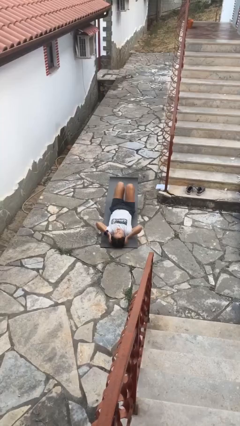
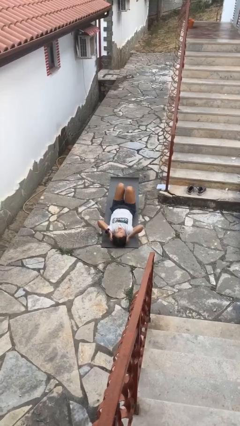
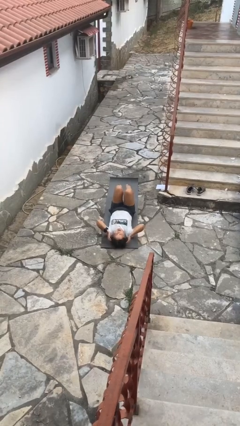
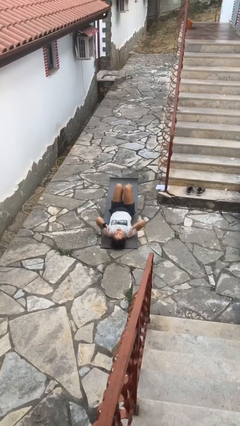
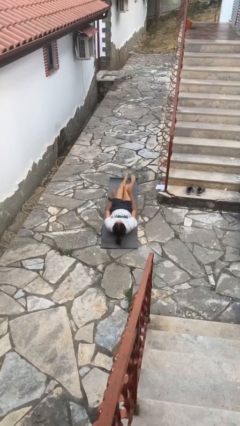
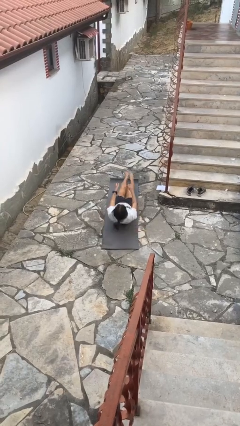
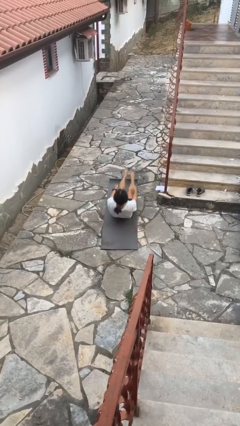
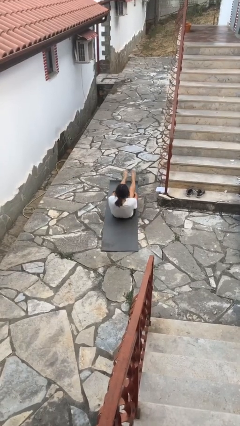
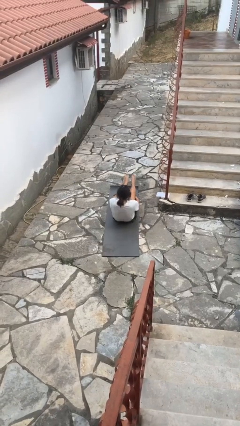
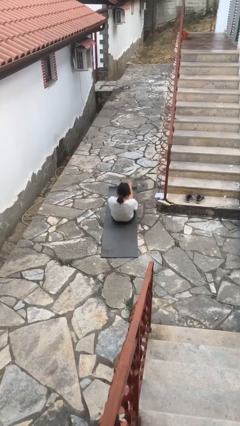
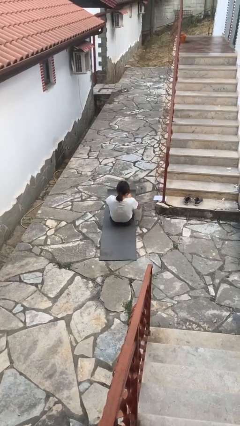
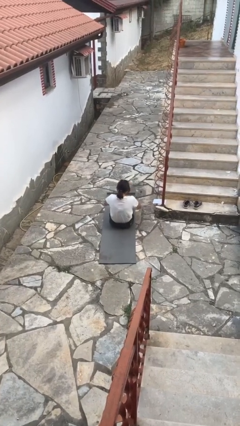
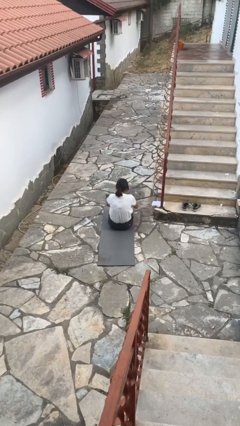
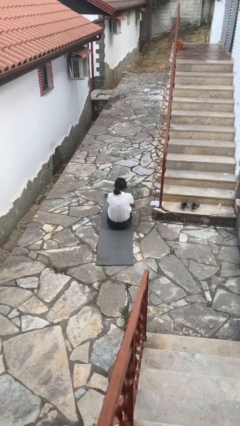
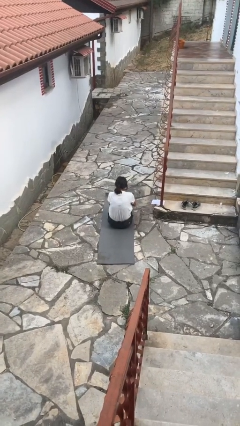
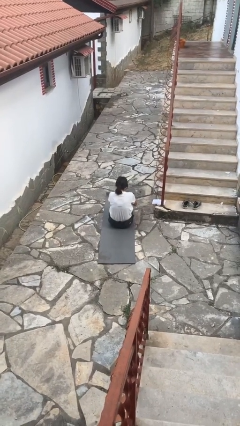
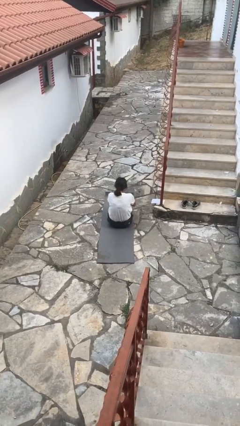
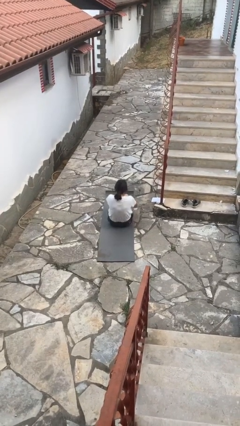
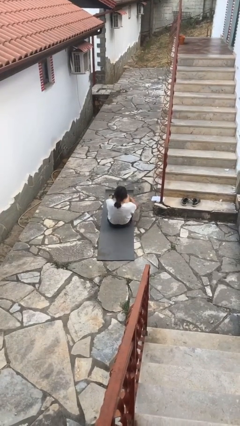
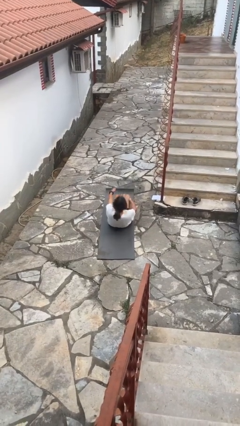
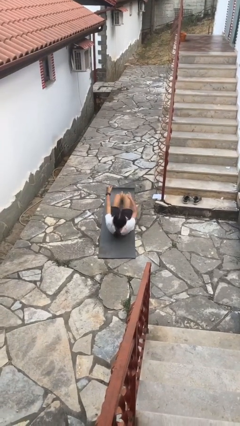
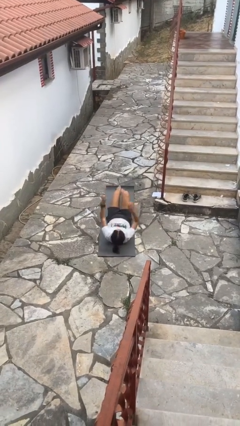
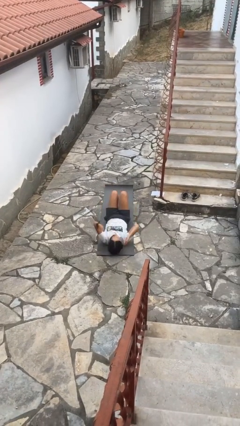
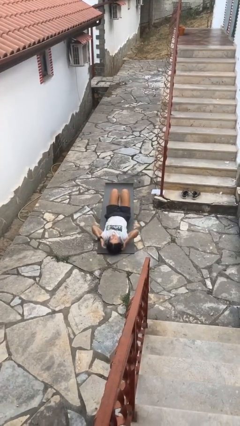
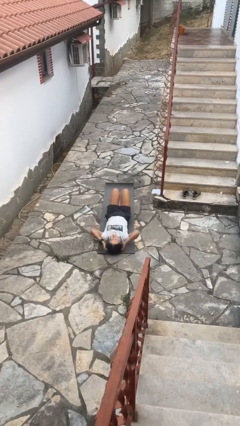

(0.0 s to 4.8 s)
person exercises with situp

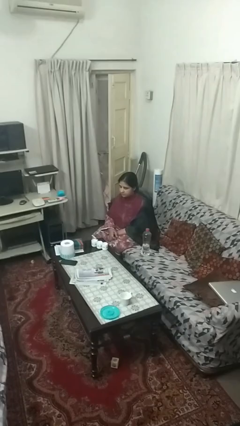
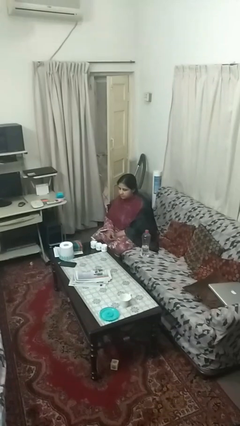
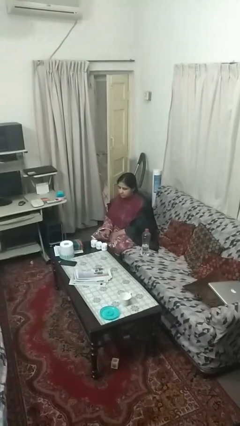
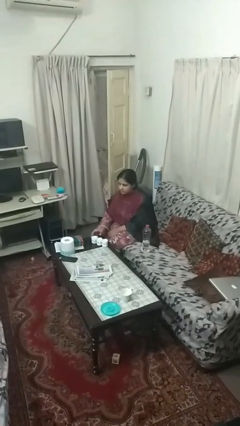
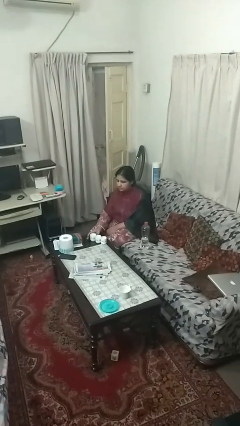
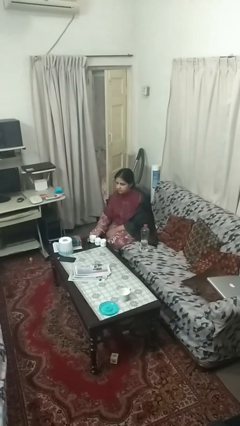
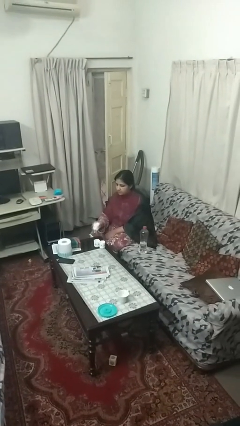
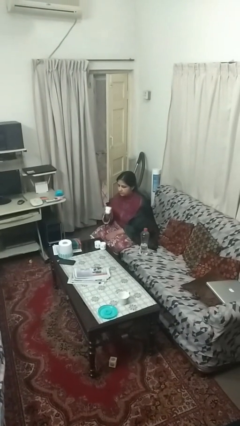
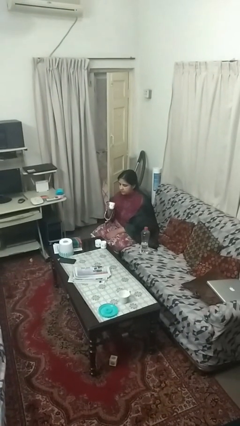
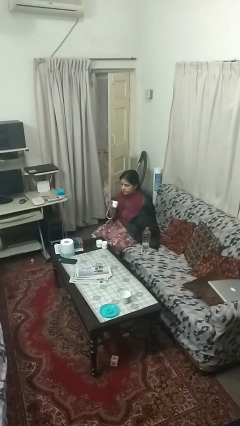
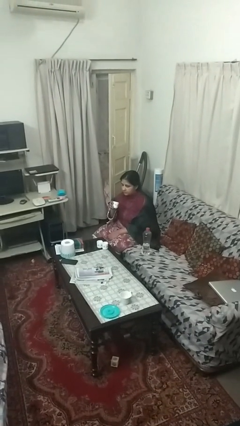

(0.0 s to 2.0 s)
person picks up object from table

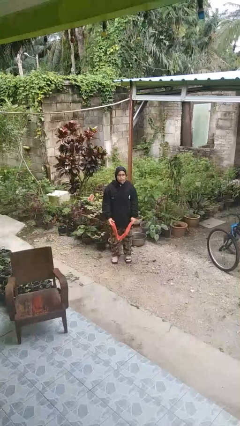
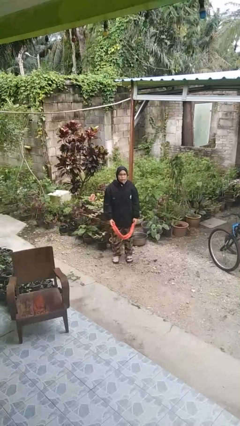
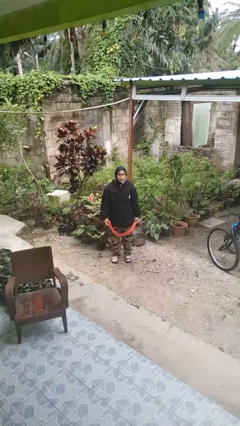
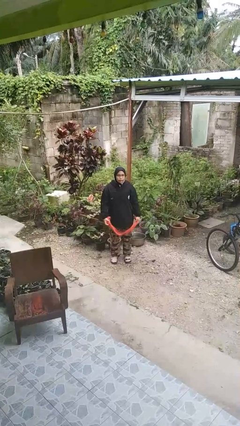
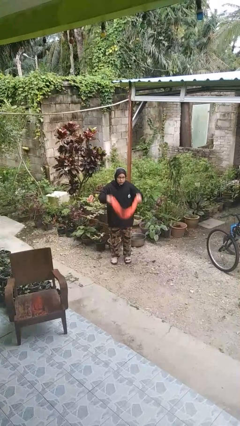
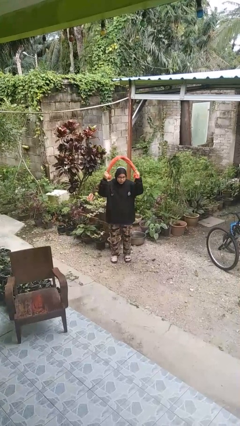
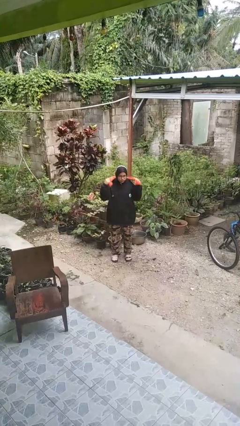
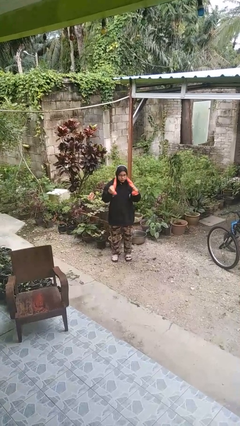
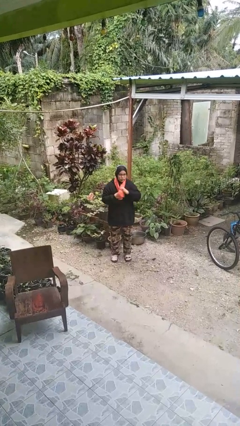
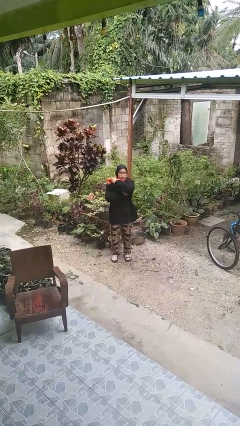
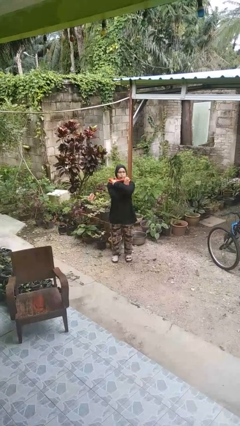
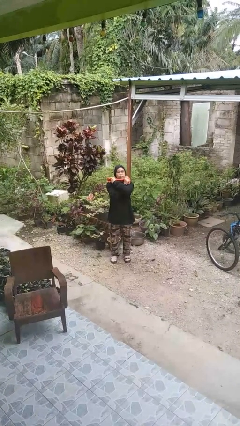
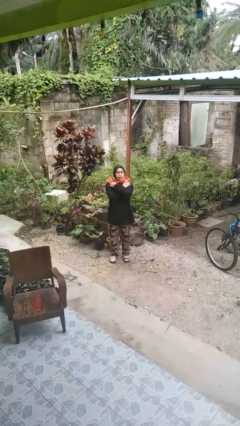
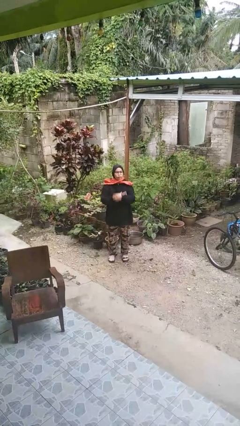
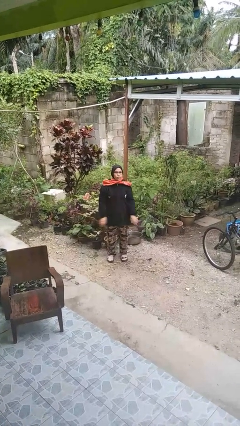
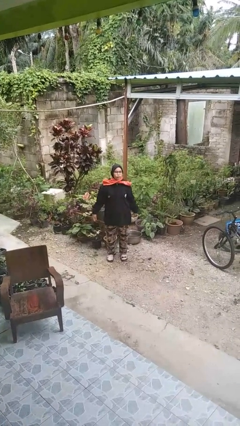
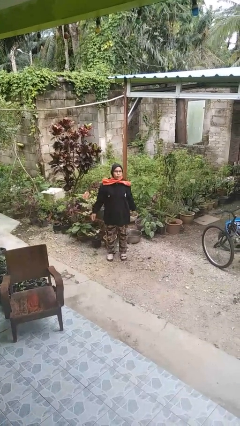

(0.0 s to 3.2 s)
person puts on scarf

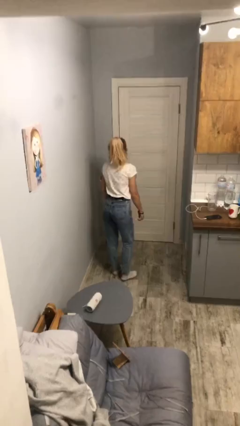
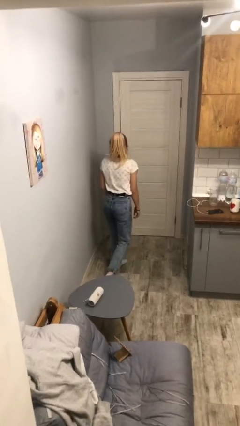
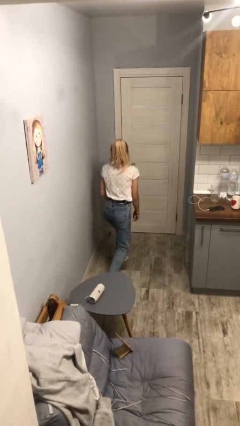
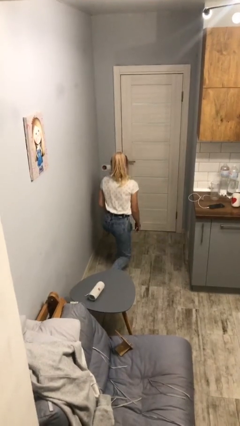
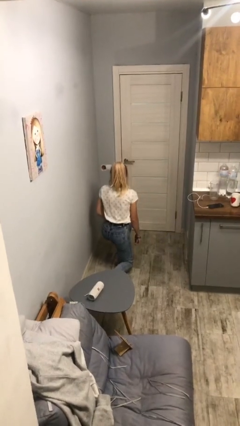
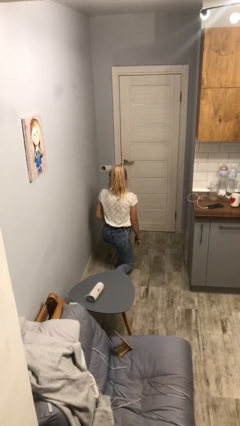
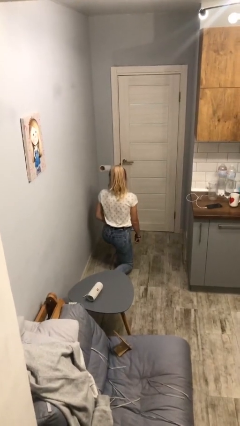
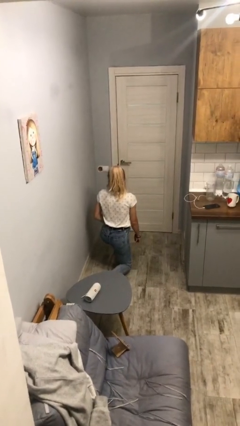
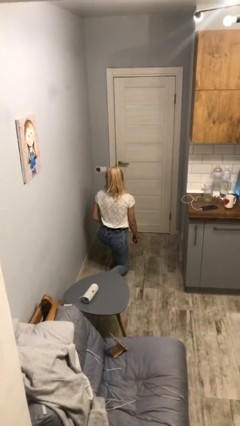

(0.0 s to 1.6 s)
person kneels

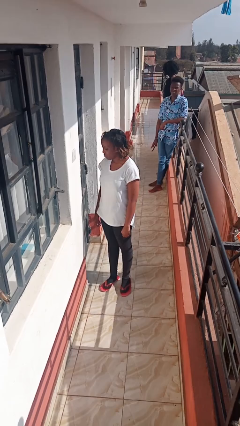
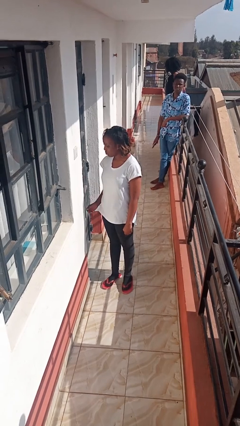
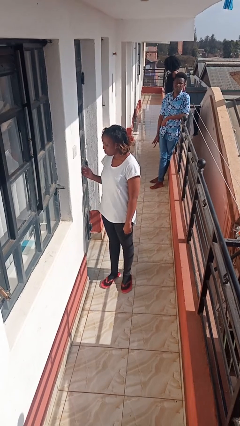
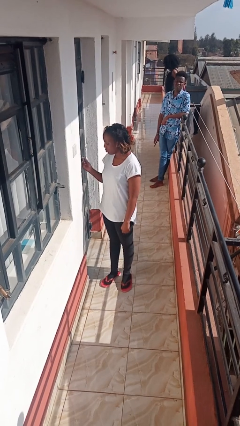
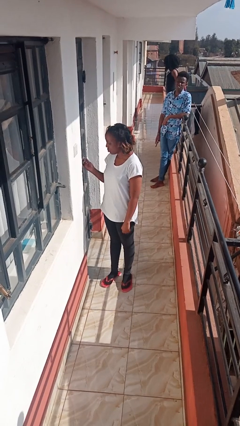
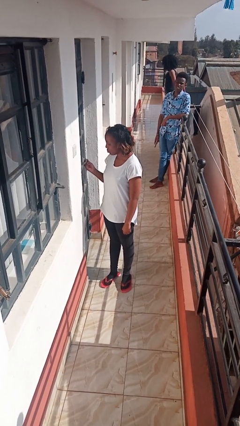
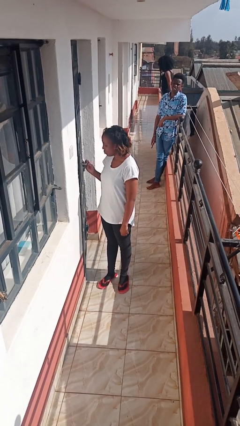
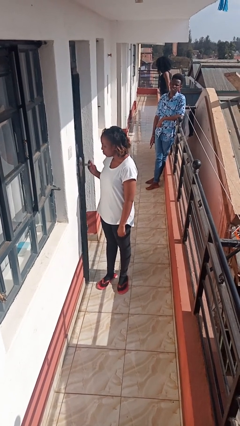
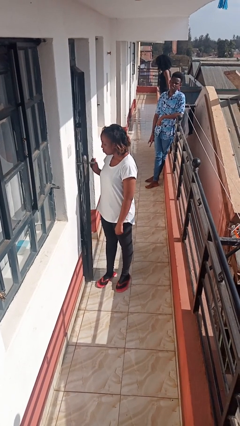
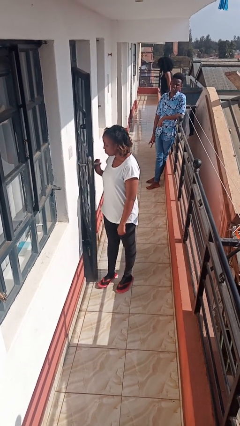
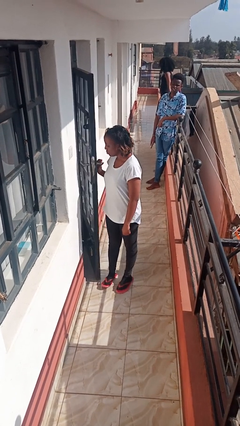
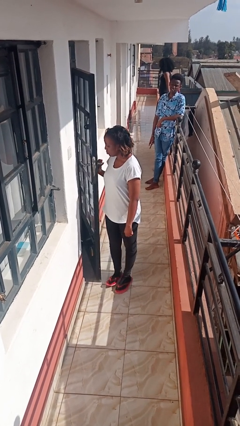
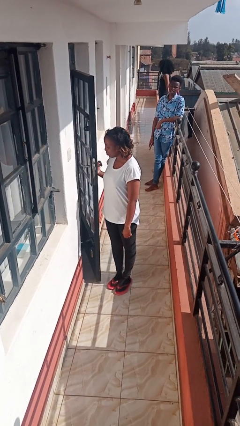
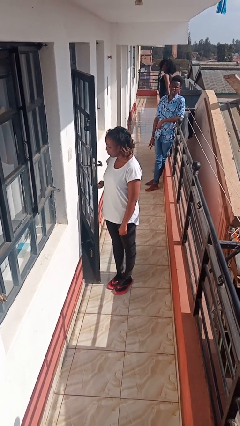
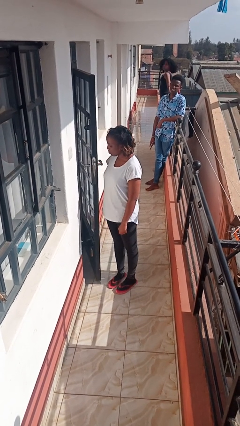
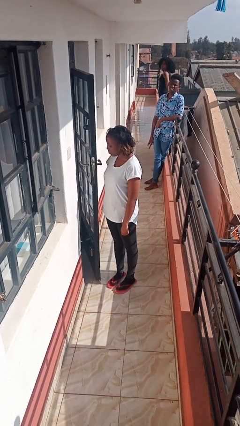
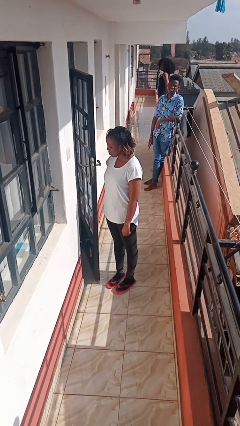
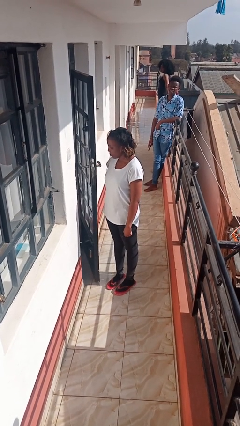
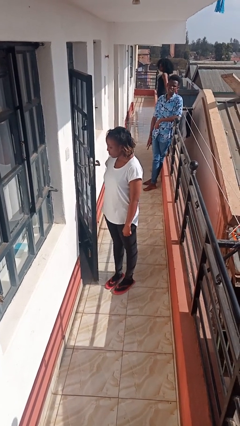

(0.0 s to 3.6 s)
person opens facility door

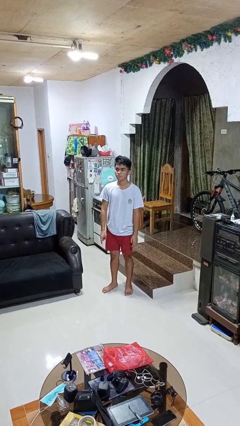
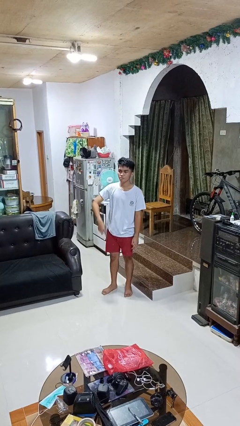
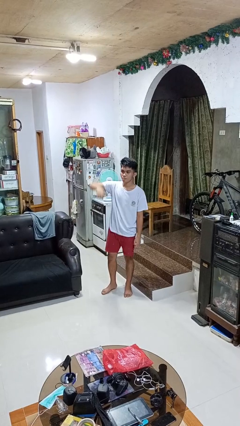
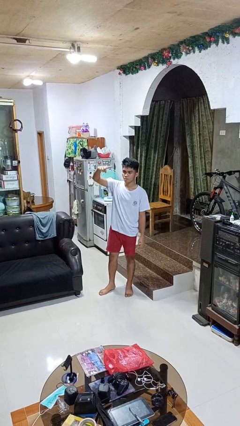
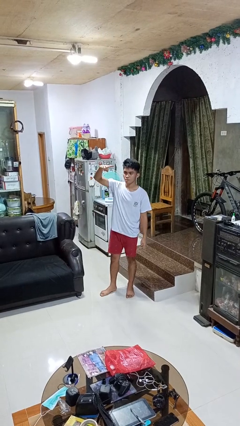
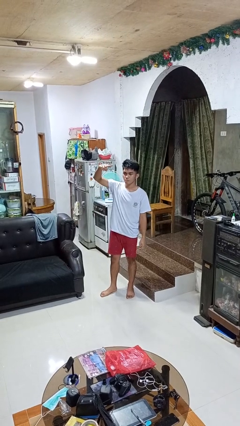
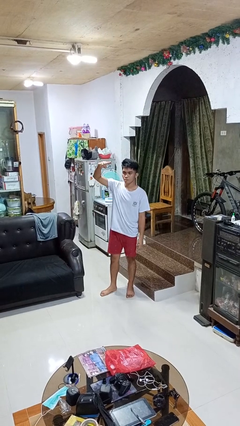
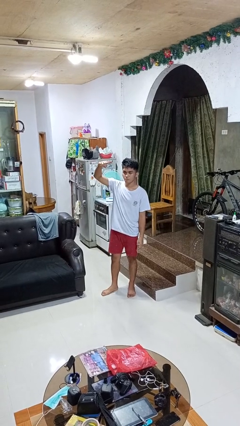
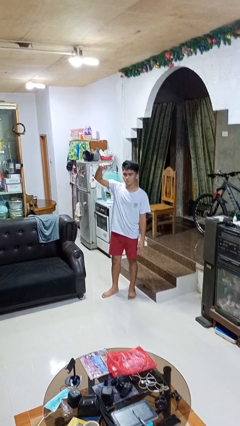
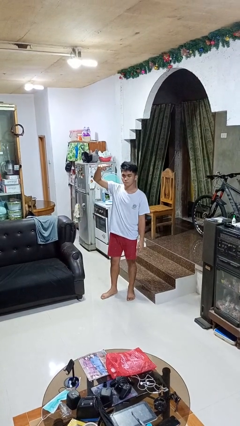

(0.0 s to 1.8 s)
person gestures swipe up
